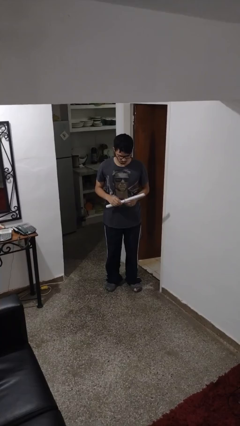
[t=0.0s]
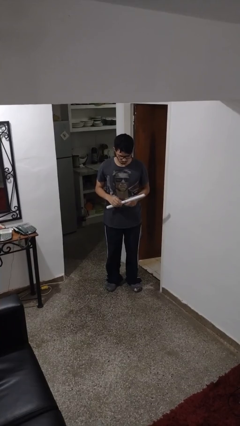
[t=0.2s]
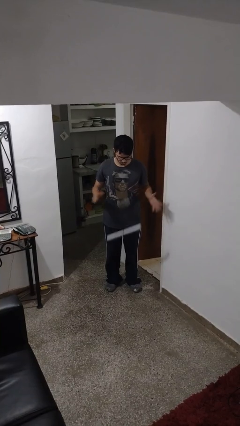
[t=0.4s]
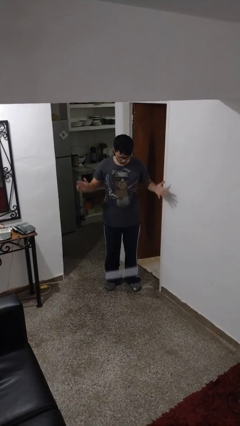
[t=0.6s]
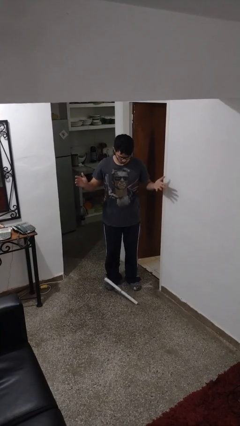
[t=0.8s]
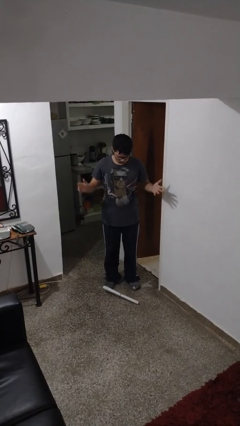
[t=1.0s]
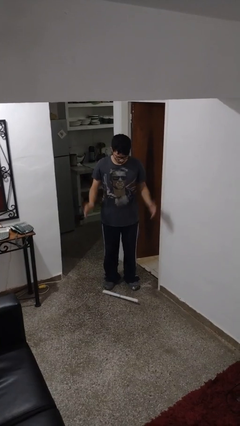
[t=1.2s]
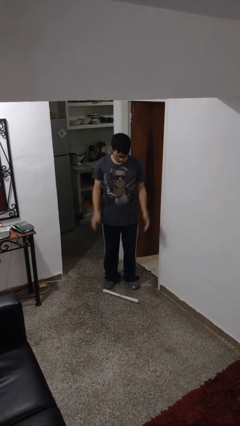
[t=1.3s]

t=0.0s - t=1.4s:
person drops object

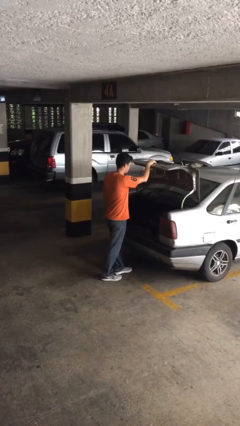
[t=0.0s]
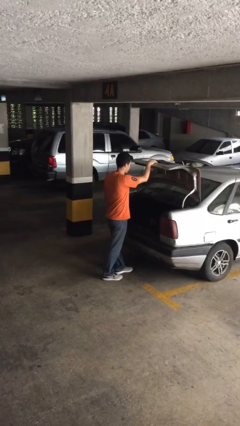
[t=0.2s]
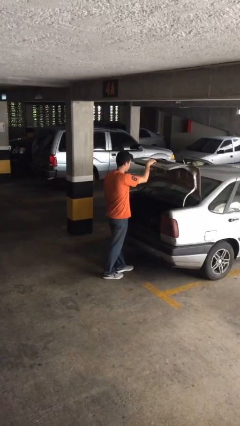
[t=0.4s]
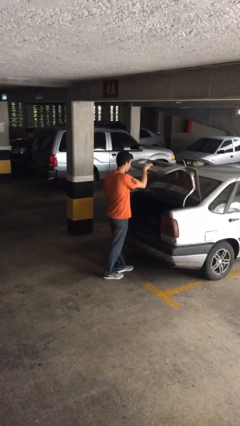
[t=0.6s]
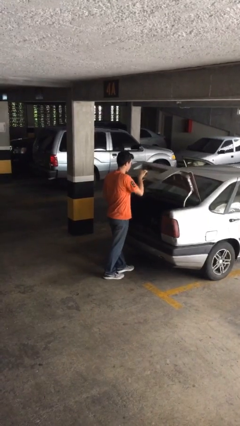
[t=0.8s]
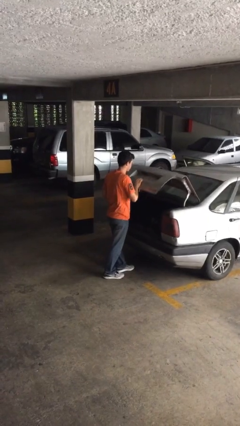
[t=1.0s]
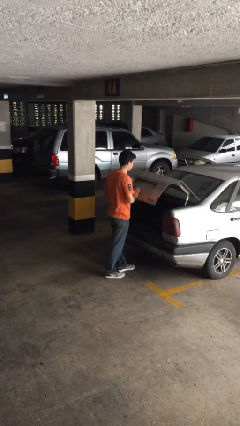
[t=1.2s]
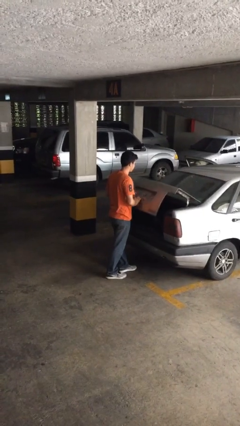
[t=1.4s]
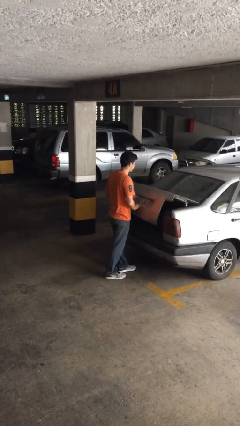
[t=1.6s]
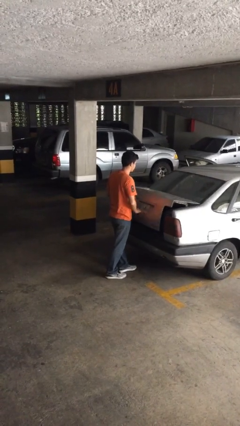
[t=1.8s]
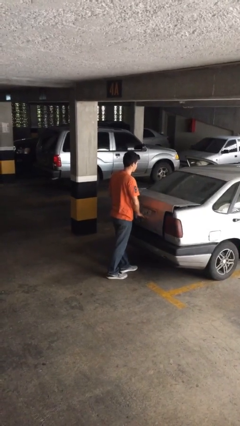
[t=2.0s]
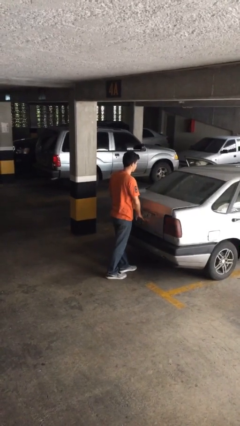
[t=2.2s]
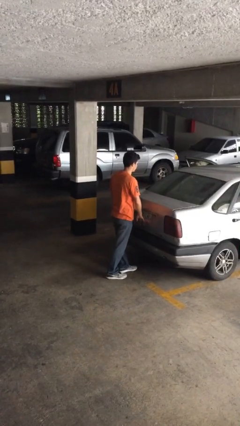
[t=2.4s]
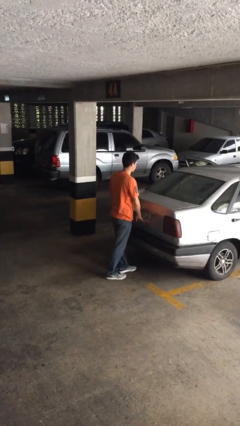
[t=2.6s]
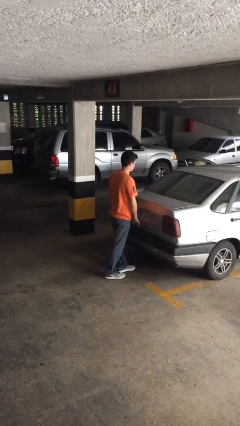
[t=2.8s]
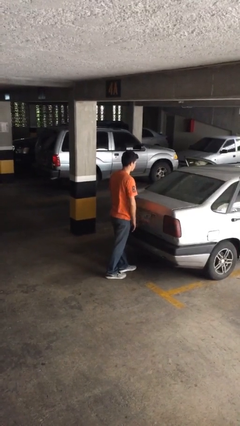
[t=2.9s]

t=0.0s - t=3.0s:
person closes car trunk

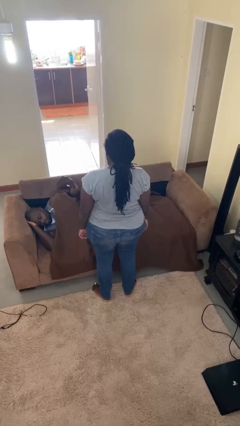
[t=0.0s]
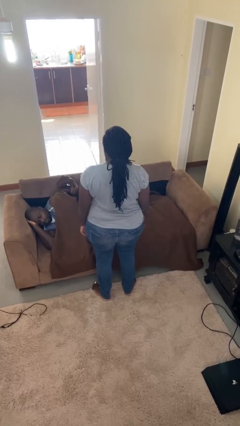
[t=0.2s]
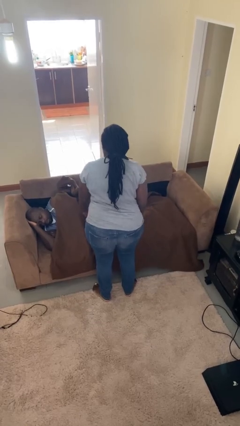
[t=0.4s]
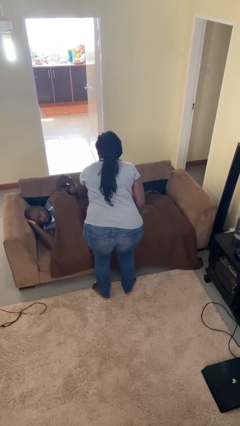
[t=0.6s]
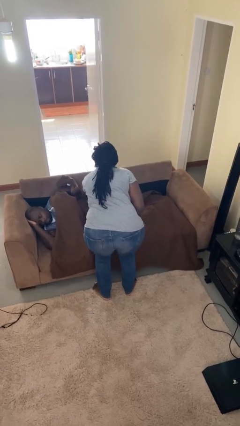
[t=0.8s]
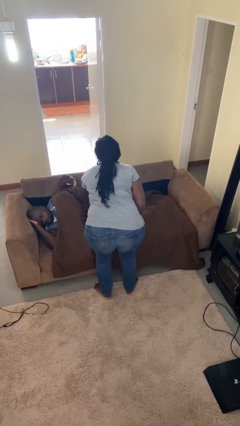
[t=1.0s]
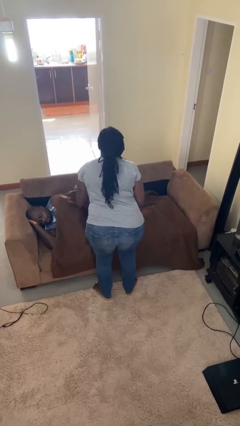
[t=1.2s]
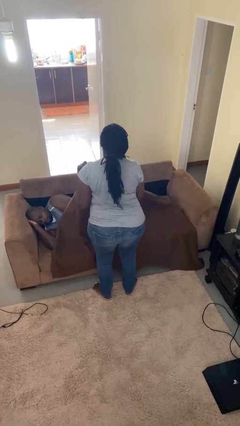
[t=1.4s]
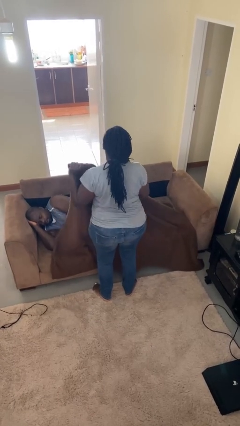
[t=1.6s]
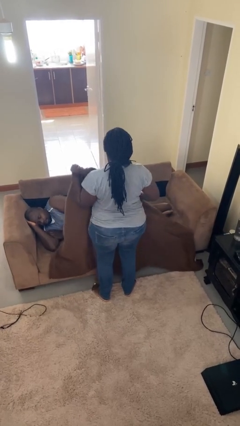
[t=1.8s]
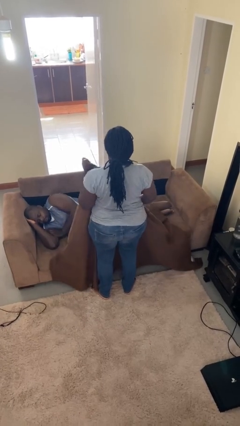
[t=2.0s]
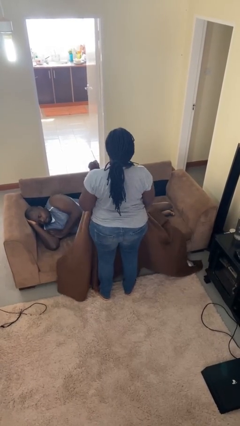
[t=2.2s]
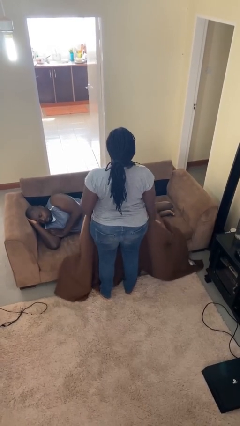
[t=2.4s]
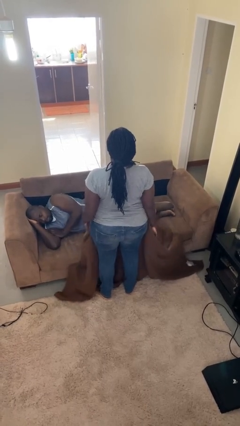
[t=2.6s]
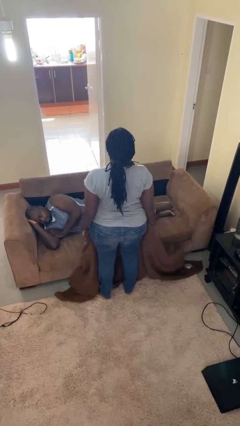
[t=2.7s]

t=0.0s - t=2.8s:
person uncovers friend with blanket

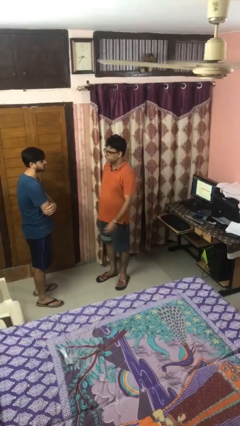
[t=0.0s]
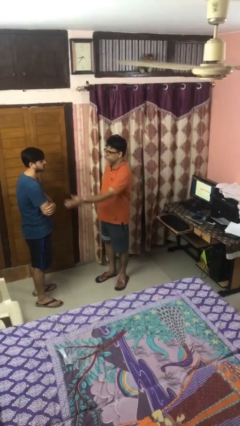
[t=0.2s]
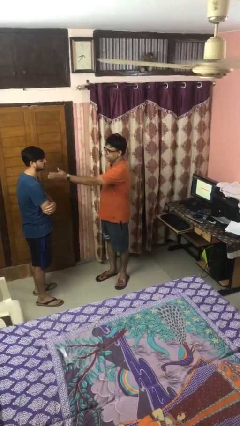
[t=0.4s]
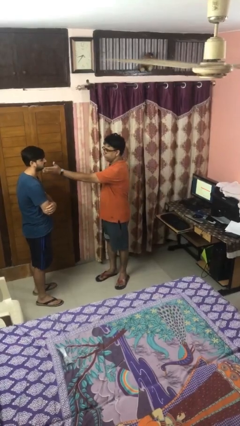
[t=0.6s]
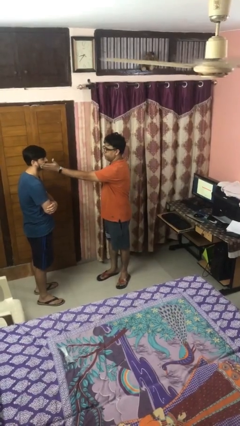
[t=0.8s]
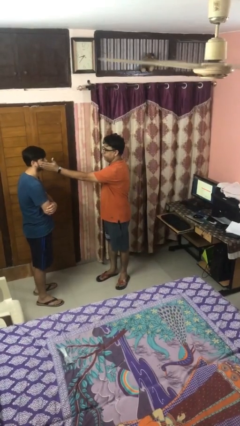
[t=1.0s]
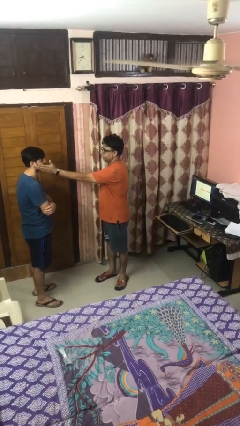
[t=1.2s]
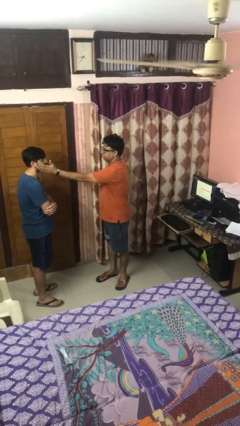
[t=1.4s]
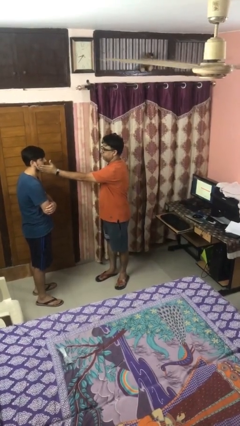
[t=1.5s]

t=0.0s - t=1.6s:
person touches face of person

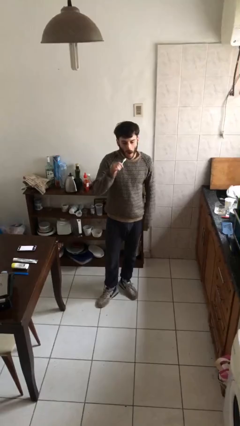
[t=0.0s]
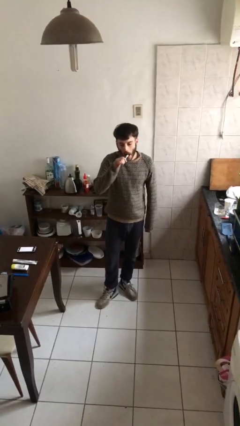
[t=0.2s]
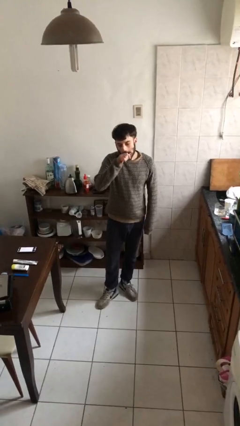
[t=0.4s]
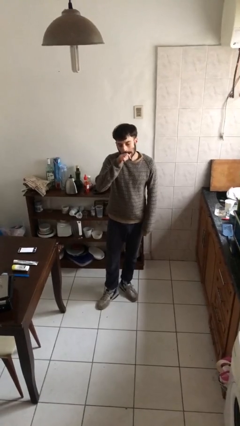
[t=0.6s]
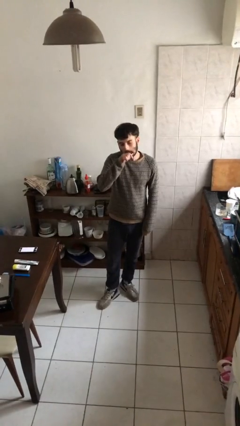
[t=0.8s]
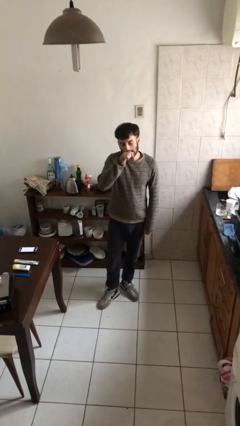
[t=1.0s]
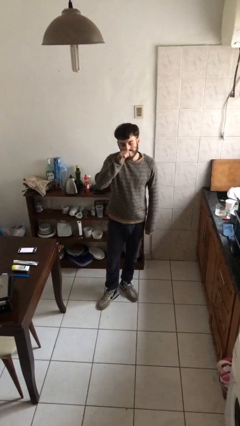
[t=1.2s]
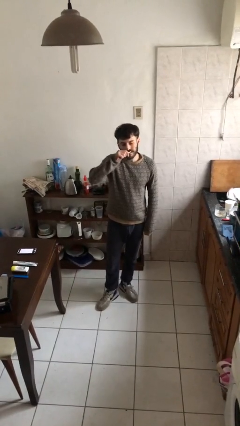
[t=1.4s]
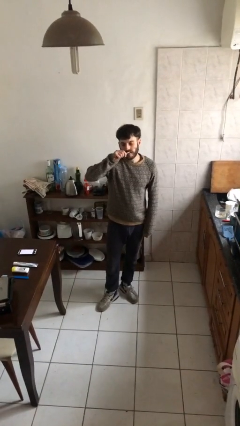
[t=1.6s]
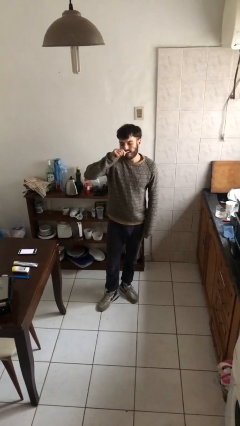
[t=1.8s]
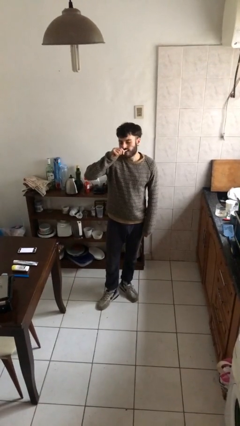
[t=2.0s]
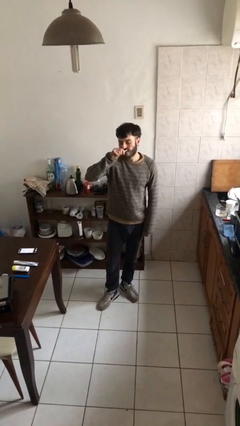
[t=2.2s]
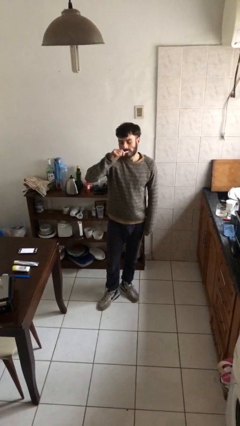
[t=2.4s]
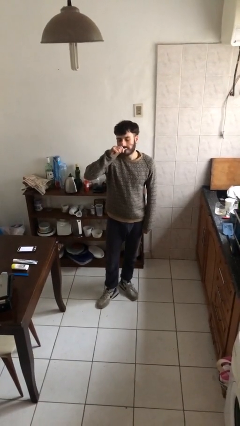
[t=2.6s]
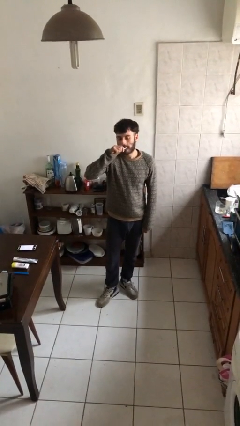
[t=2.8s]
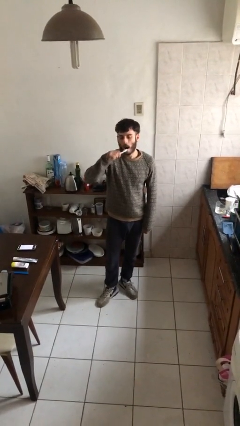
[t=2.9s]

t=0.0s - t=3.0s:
person brushes teeth

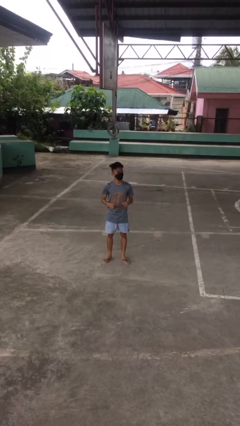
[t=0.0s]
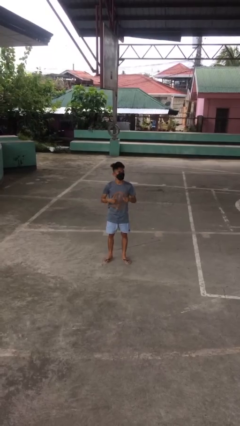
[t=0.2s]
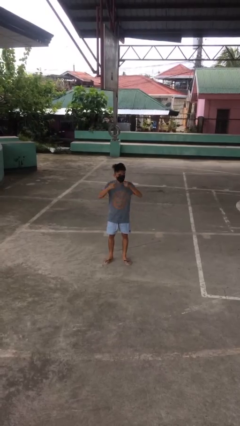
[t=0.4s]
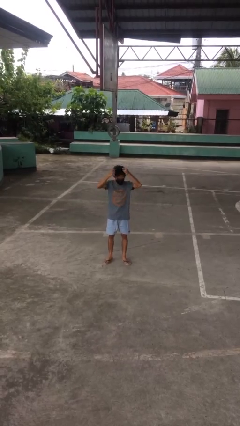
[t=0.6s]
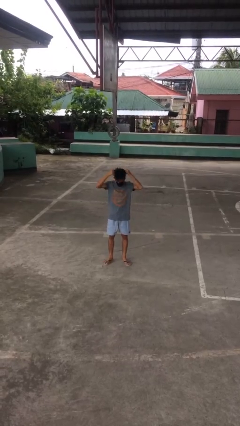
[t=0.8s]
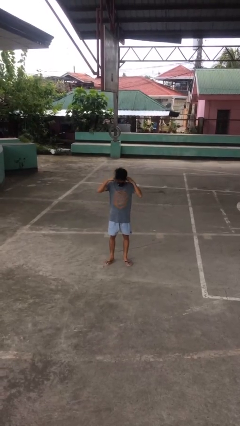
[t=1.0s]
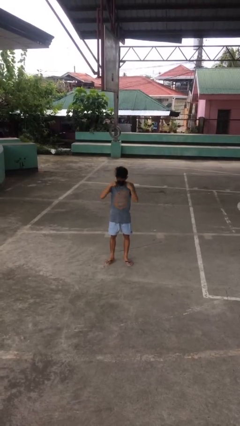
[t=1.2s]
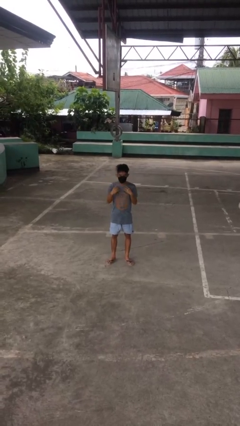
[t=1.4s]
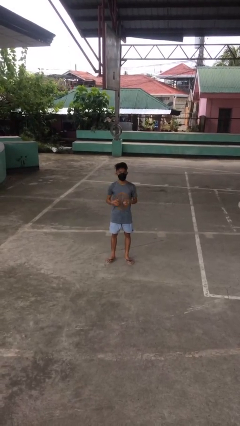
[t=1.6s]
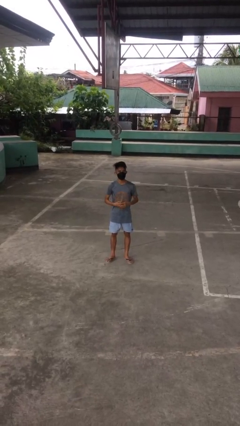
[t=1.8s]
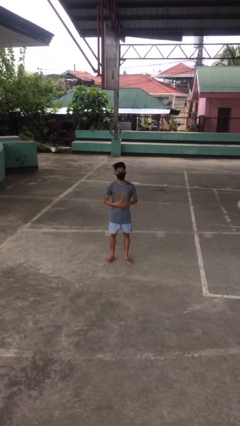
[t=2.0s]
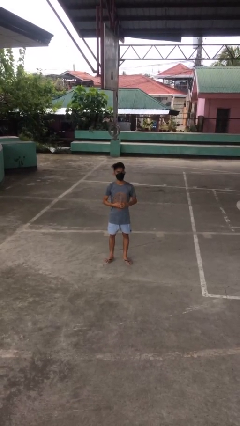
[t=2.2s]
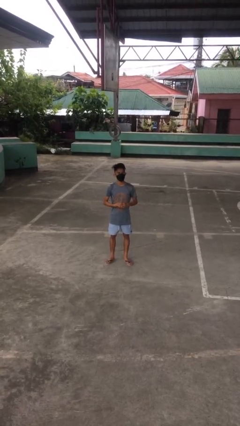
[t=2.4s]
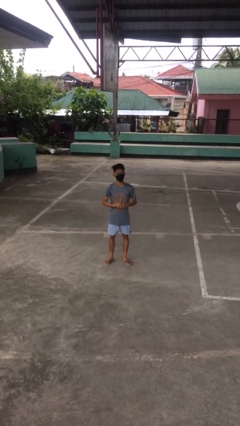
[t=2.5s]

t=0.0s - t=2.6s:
person puts on necklace

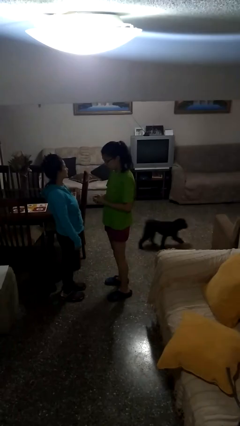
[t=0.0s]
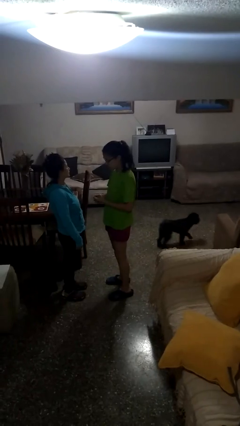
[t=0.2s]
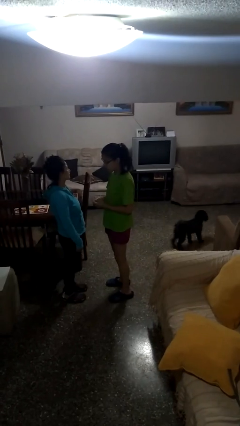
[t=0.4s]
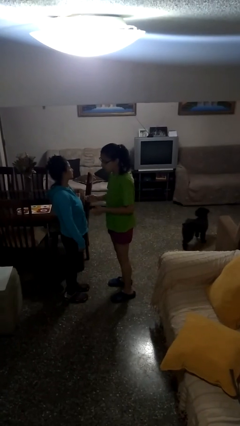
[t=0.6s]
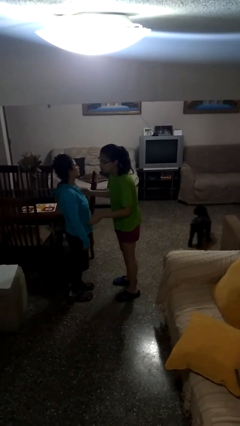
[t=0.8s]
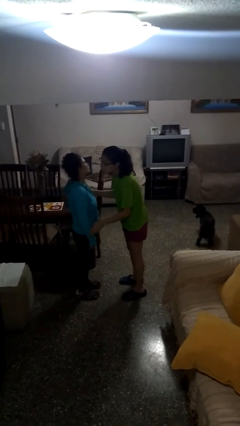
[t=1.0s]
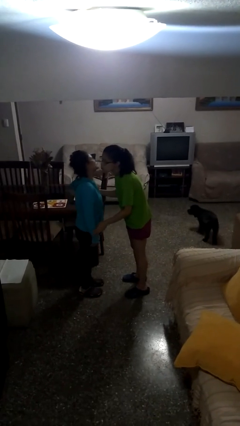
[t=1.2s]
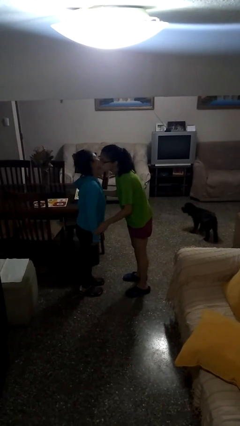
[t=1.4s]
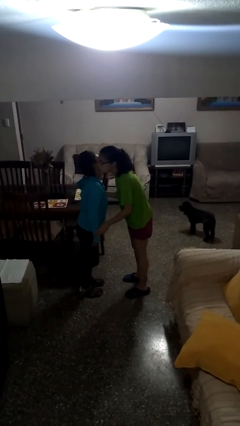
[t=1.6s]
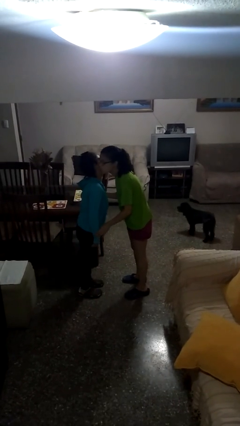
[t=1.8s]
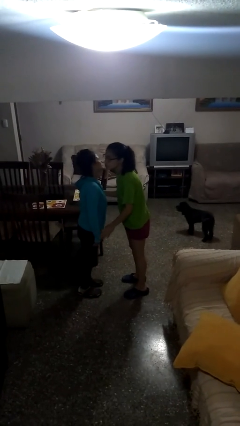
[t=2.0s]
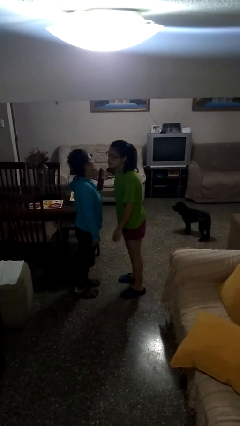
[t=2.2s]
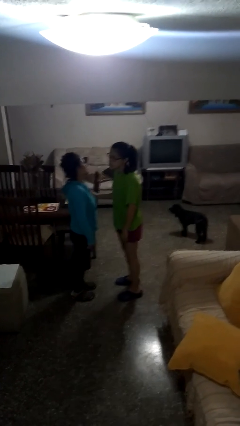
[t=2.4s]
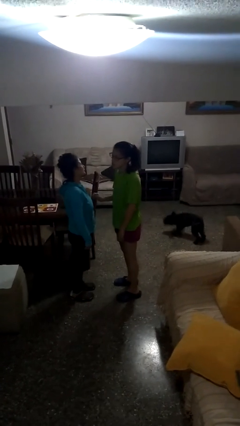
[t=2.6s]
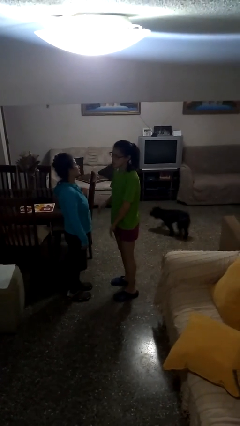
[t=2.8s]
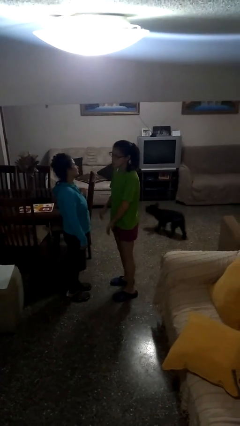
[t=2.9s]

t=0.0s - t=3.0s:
person kisses cheek of person
